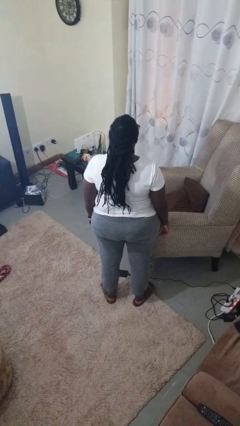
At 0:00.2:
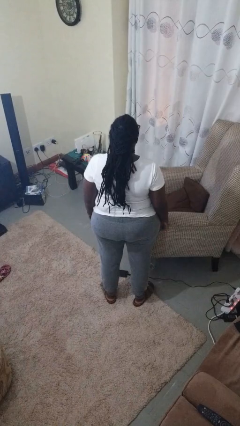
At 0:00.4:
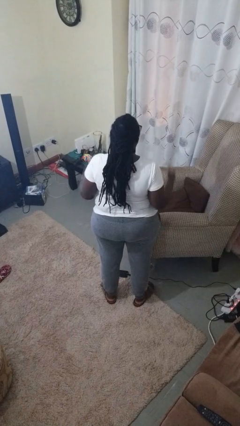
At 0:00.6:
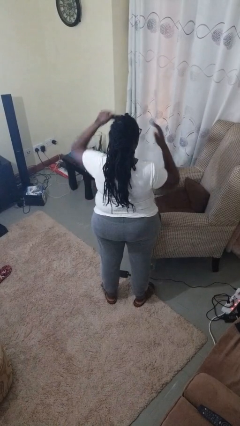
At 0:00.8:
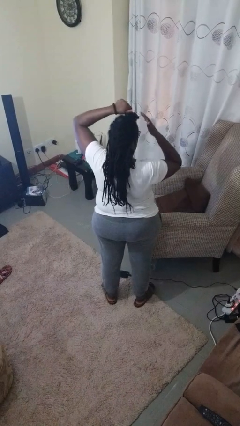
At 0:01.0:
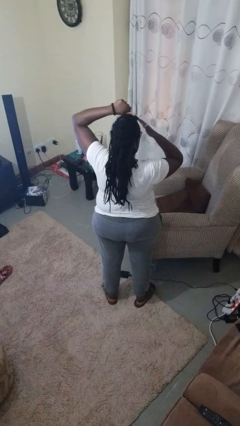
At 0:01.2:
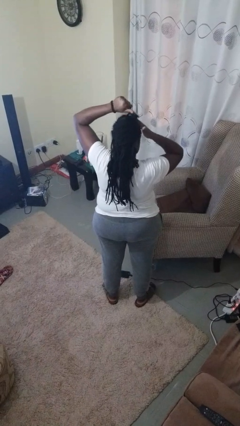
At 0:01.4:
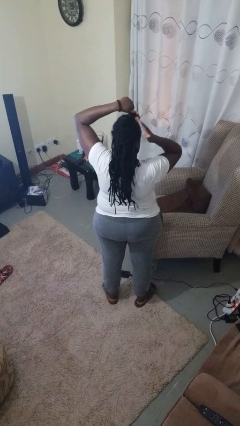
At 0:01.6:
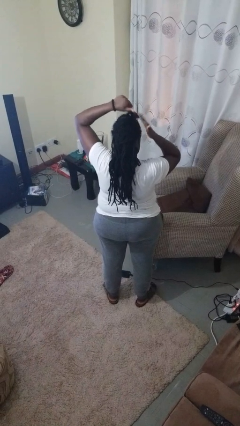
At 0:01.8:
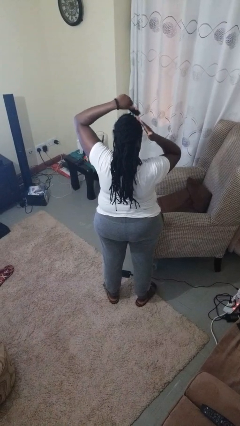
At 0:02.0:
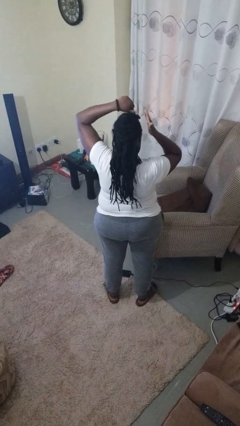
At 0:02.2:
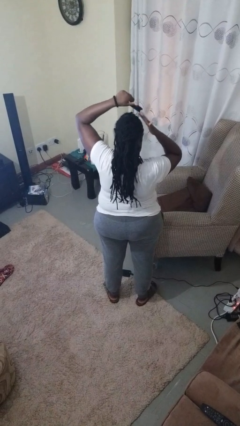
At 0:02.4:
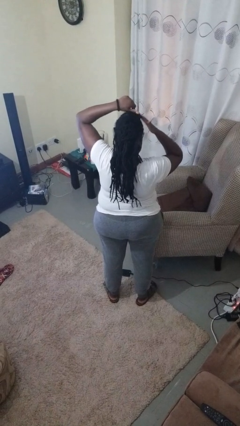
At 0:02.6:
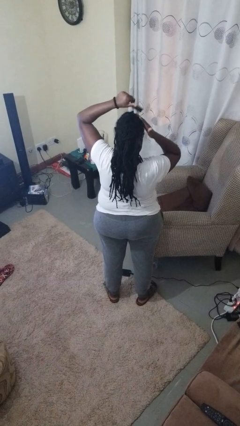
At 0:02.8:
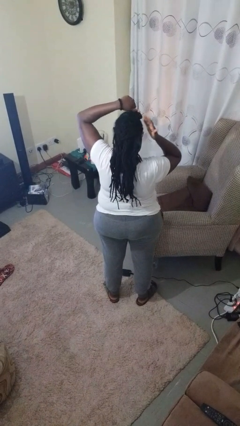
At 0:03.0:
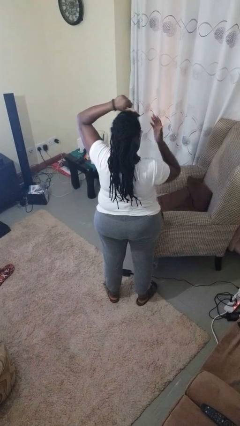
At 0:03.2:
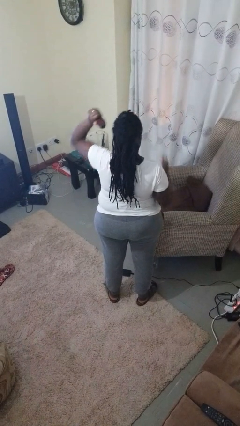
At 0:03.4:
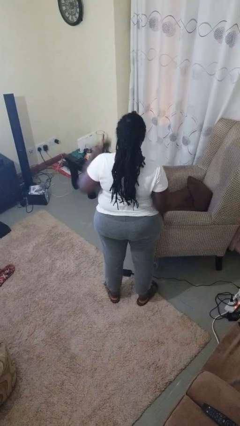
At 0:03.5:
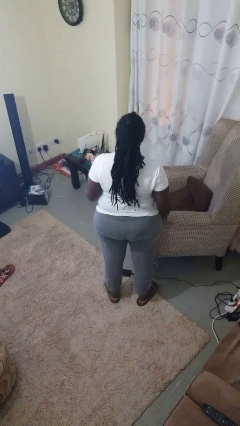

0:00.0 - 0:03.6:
person brushes hair

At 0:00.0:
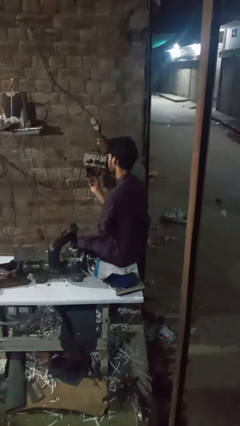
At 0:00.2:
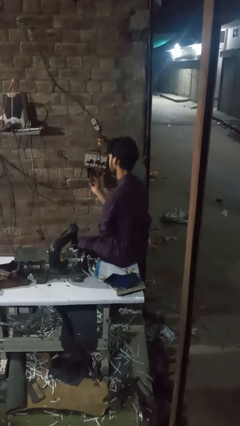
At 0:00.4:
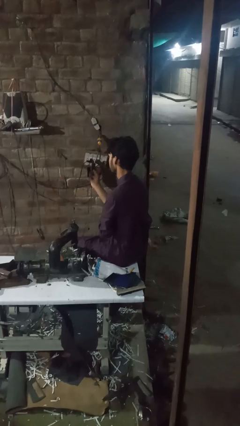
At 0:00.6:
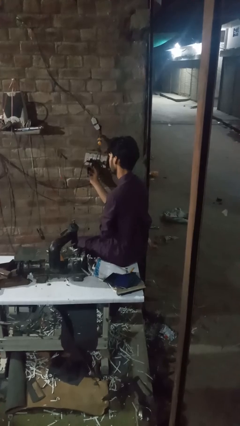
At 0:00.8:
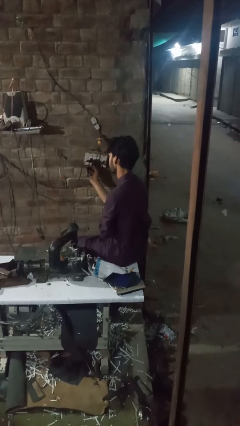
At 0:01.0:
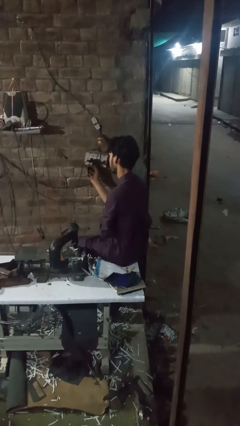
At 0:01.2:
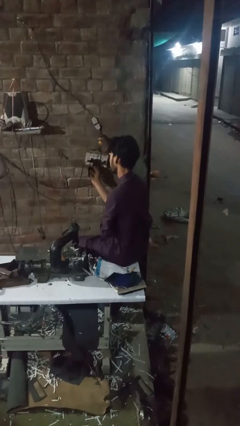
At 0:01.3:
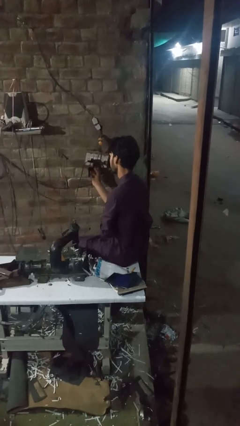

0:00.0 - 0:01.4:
person plugs into electrical socket

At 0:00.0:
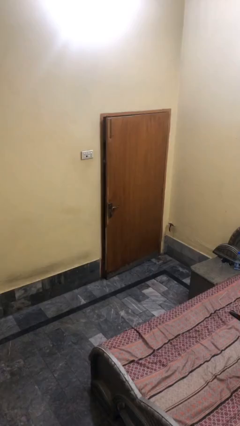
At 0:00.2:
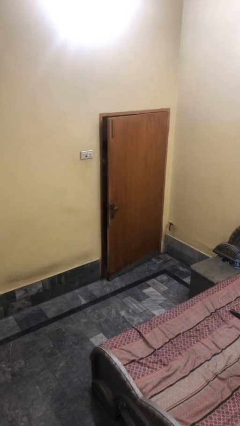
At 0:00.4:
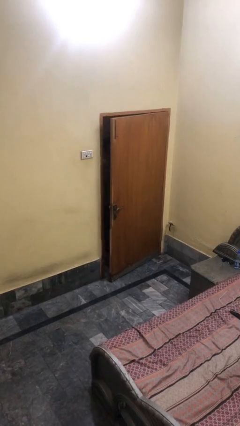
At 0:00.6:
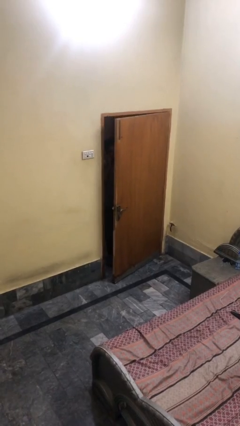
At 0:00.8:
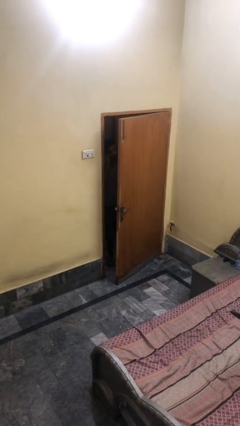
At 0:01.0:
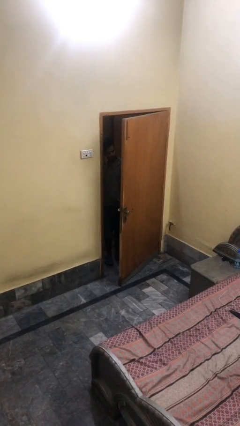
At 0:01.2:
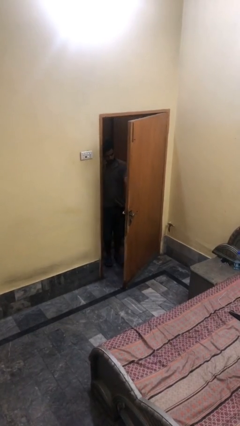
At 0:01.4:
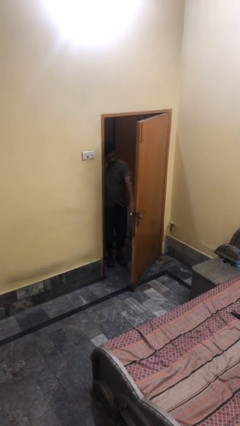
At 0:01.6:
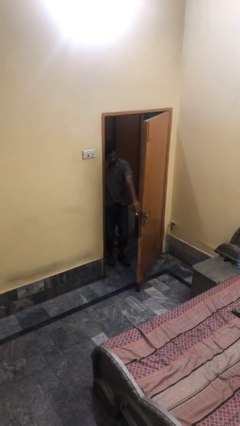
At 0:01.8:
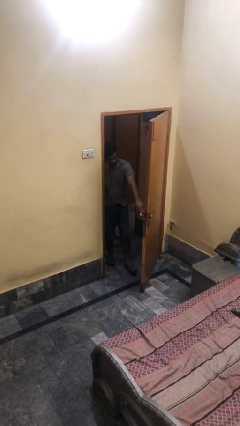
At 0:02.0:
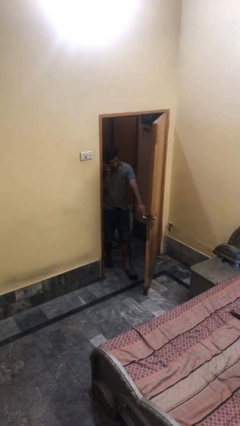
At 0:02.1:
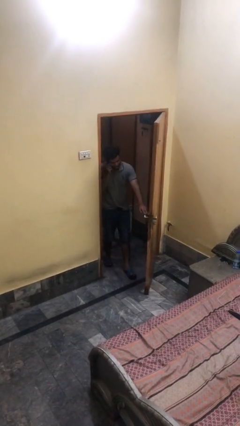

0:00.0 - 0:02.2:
person opens facility door

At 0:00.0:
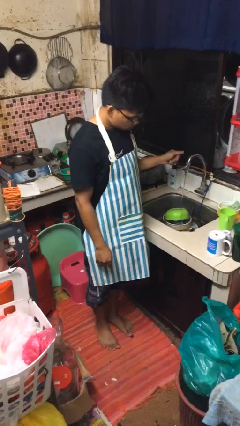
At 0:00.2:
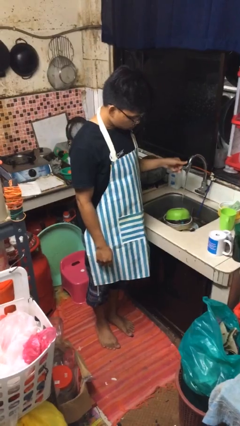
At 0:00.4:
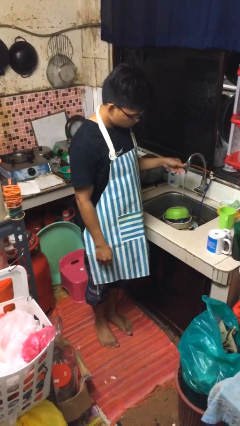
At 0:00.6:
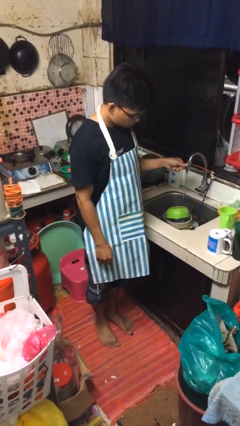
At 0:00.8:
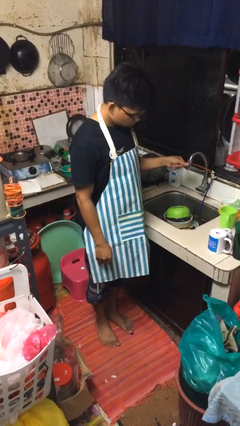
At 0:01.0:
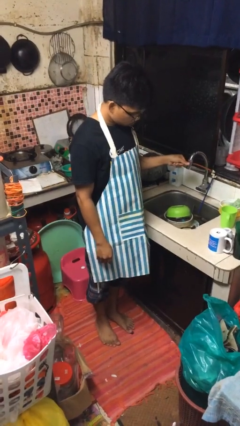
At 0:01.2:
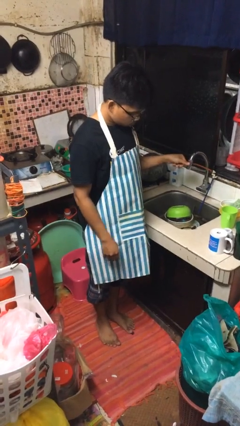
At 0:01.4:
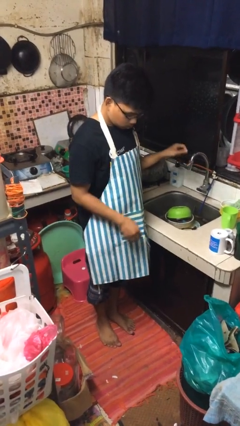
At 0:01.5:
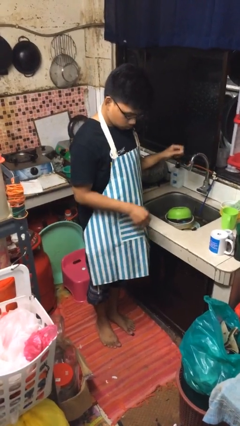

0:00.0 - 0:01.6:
person turns off faucet

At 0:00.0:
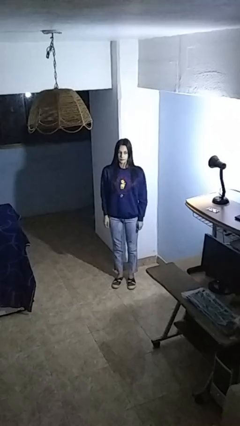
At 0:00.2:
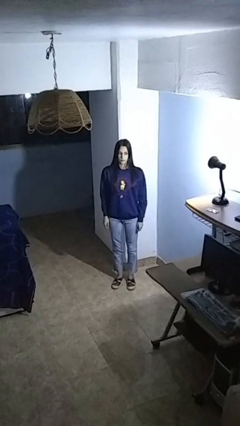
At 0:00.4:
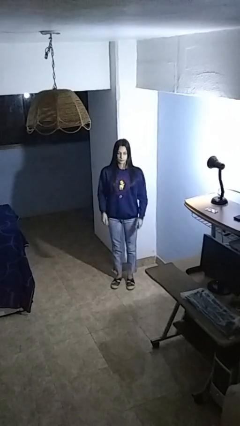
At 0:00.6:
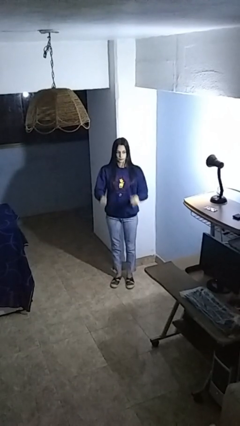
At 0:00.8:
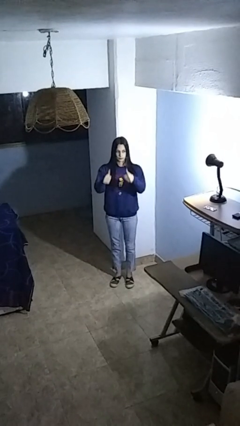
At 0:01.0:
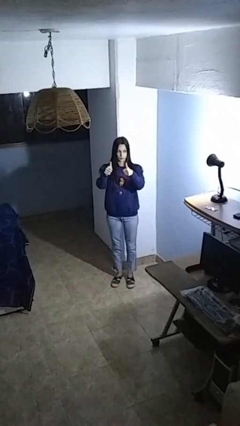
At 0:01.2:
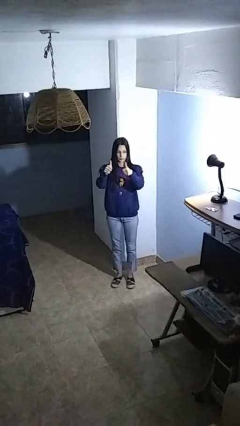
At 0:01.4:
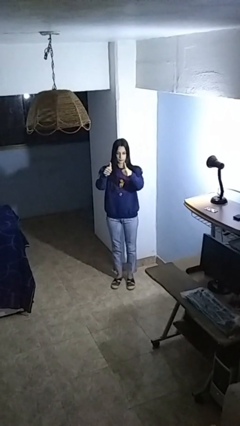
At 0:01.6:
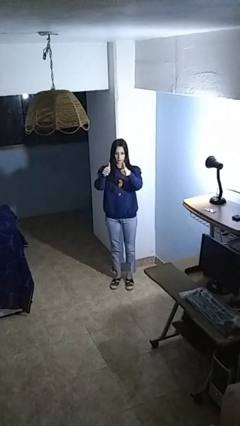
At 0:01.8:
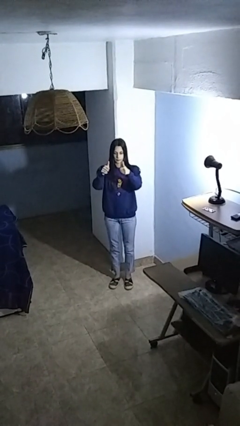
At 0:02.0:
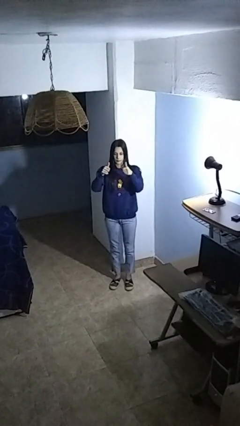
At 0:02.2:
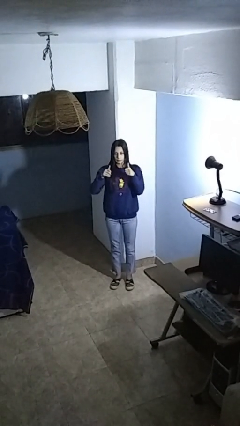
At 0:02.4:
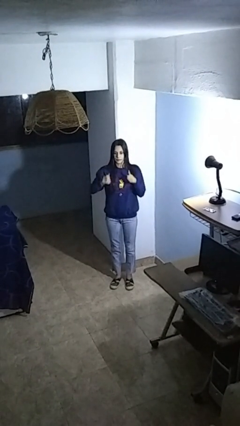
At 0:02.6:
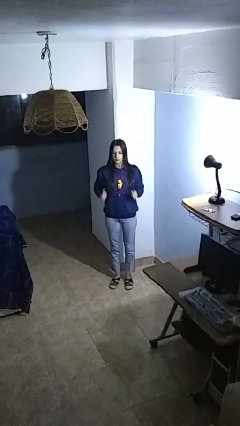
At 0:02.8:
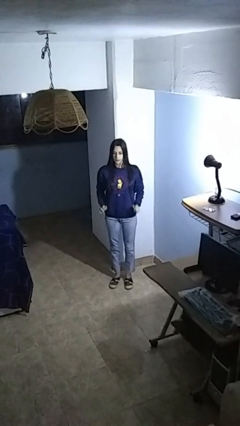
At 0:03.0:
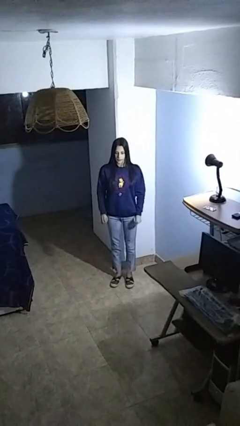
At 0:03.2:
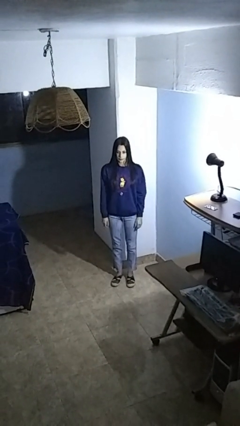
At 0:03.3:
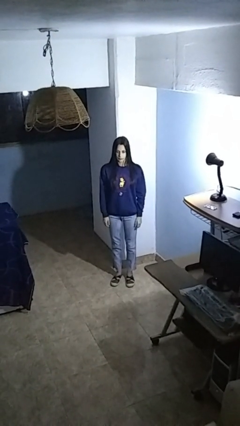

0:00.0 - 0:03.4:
person gestures thumbs up

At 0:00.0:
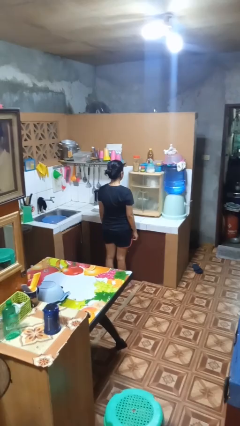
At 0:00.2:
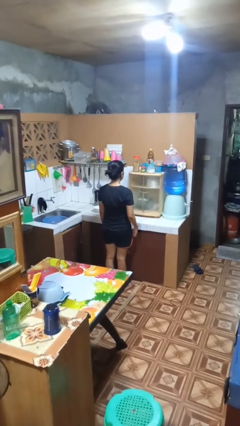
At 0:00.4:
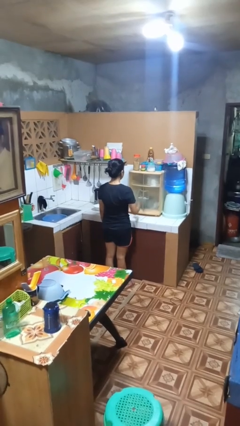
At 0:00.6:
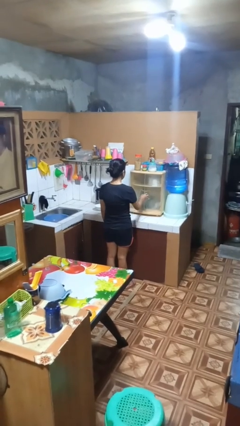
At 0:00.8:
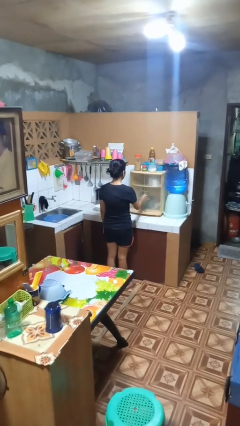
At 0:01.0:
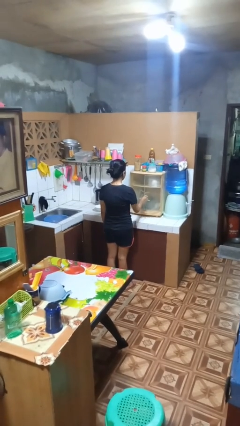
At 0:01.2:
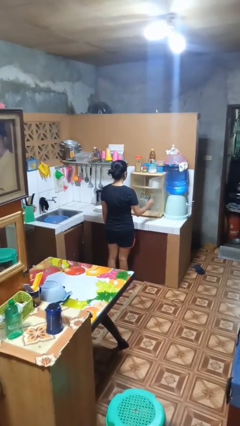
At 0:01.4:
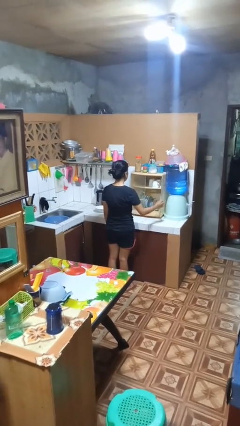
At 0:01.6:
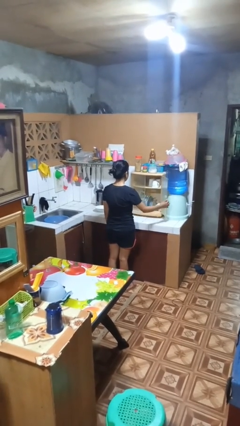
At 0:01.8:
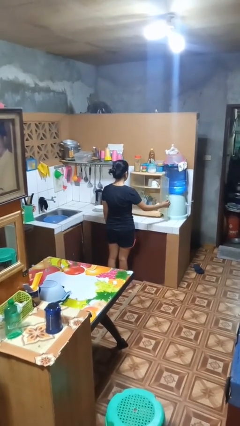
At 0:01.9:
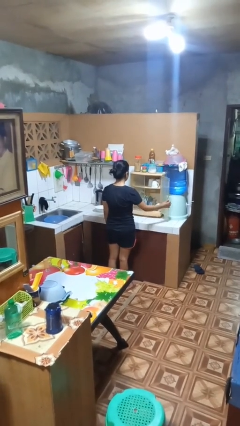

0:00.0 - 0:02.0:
person opens kitchen drawer

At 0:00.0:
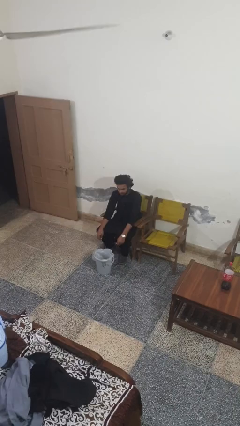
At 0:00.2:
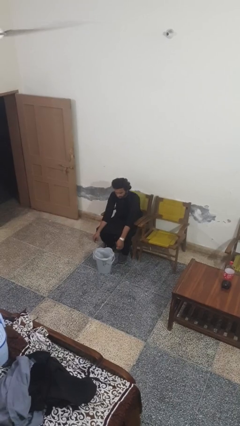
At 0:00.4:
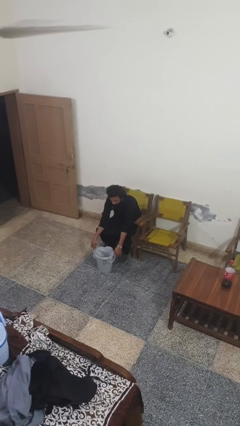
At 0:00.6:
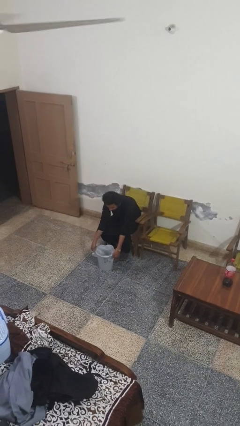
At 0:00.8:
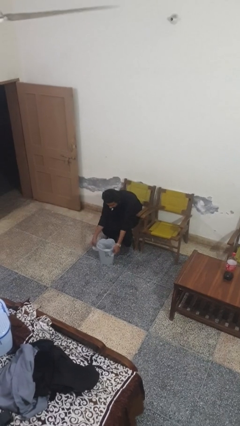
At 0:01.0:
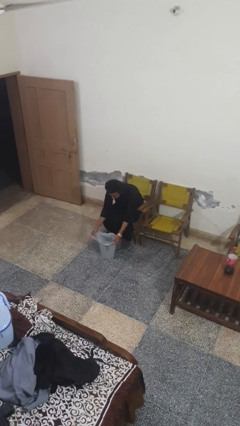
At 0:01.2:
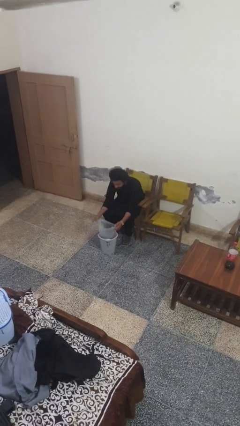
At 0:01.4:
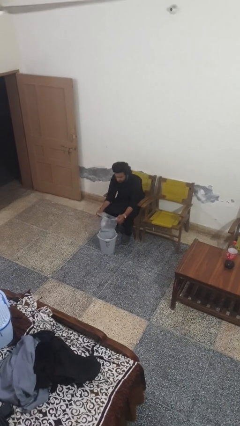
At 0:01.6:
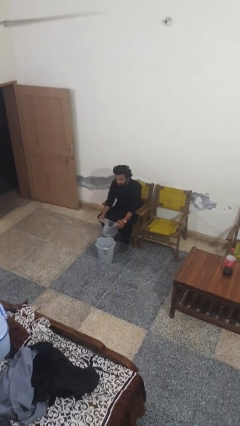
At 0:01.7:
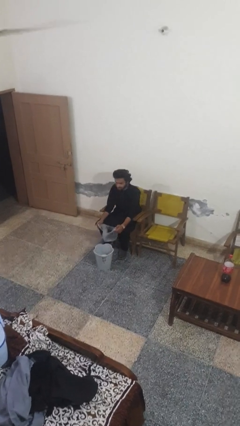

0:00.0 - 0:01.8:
person removes trashbag from trashcan

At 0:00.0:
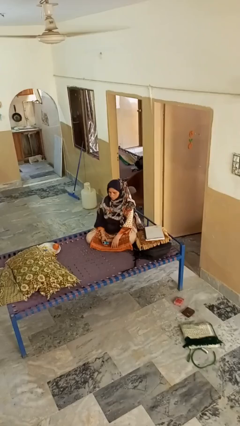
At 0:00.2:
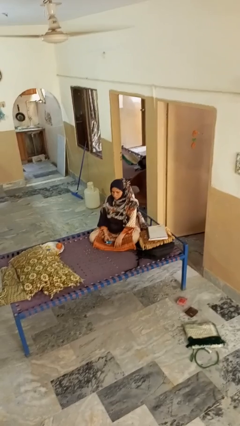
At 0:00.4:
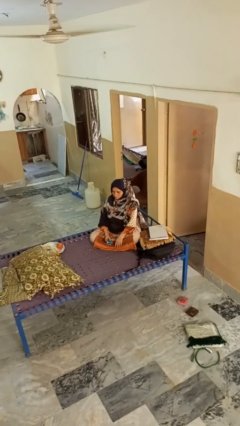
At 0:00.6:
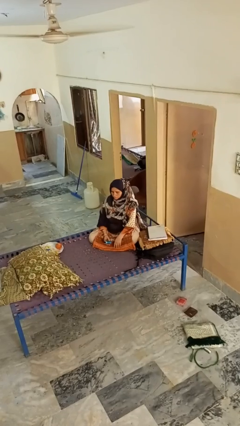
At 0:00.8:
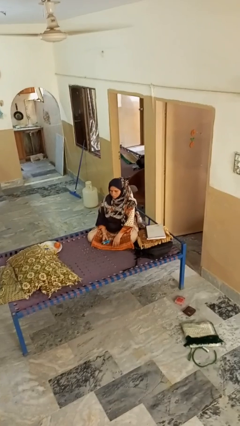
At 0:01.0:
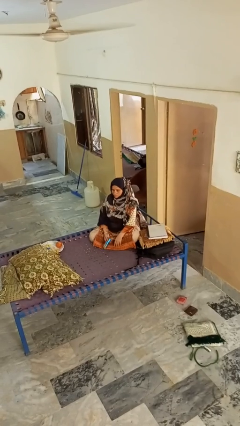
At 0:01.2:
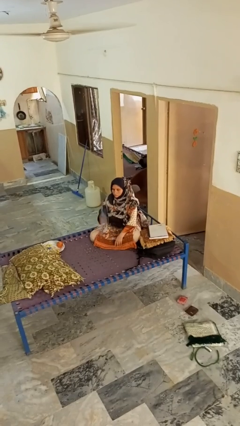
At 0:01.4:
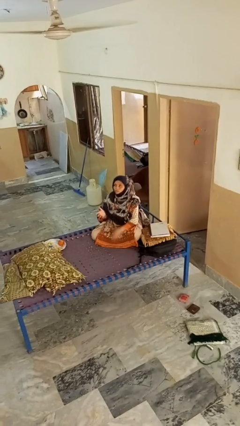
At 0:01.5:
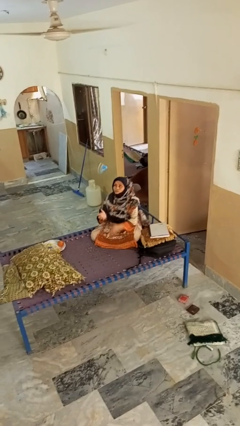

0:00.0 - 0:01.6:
person drops object
